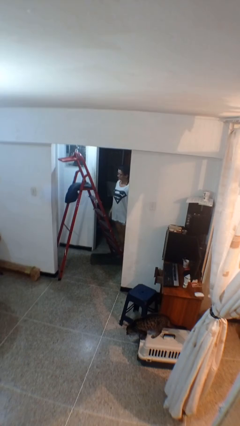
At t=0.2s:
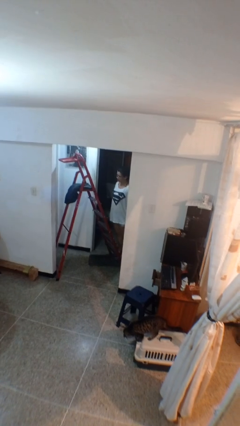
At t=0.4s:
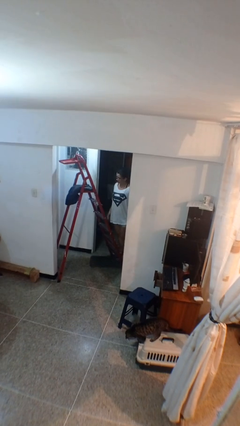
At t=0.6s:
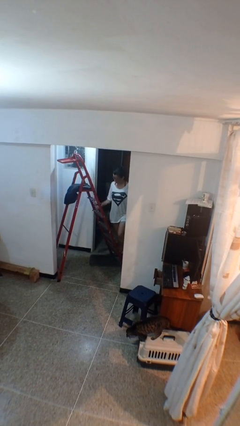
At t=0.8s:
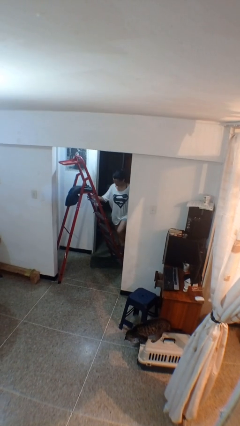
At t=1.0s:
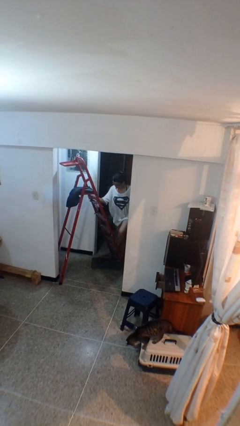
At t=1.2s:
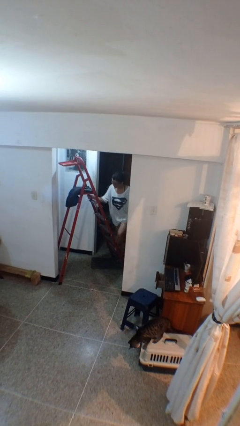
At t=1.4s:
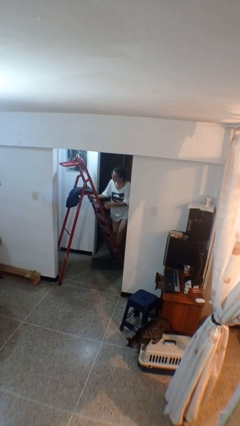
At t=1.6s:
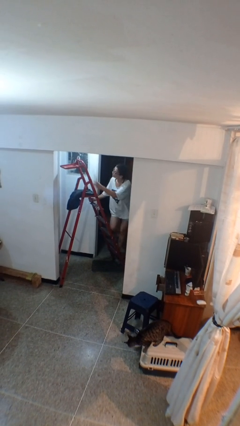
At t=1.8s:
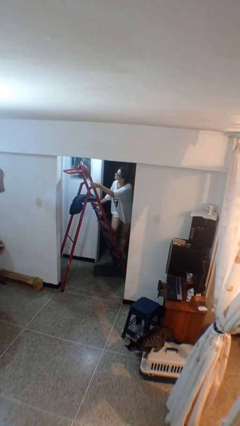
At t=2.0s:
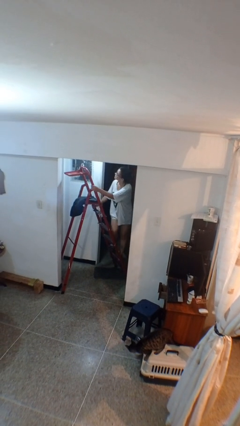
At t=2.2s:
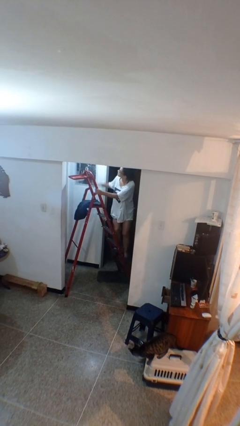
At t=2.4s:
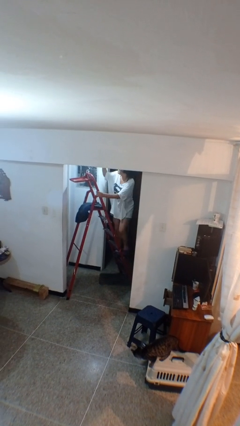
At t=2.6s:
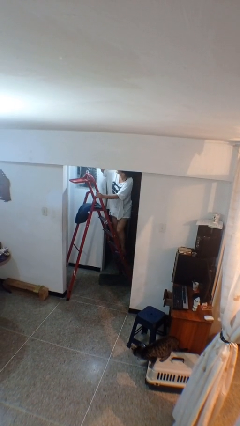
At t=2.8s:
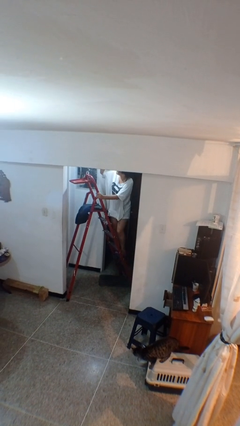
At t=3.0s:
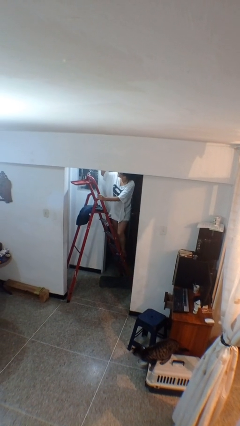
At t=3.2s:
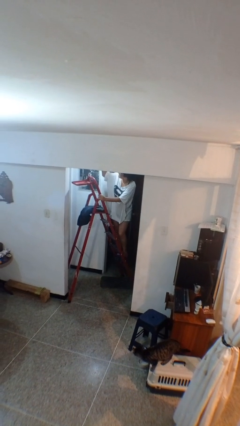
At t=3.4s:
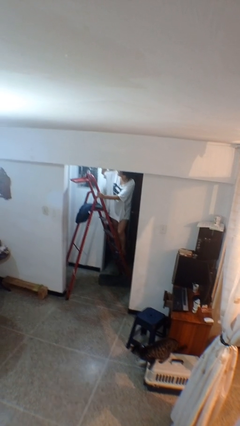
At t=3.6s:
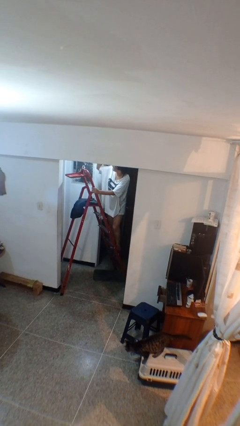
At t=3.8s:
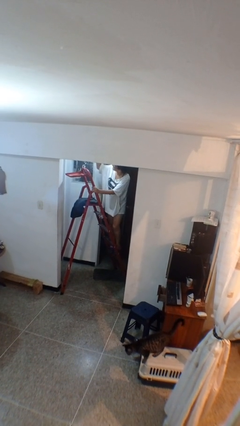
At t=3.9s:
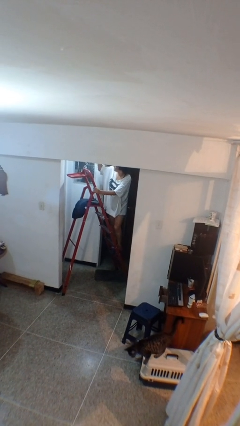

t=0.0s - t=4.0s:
person climbs up ladder

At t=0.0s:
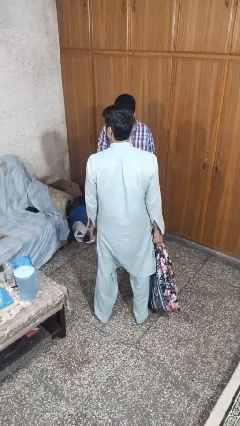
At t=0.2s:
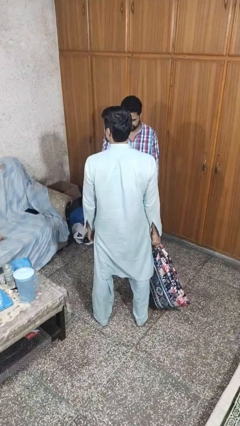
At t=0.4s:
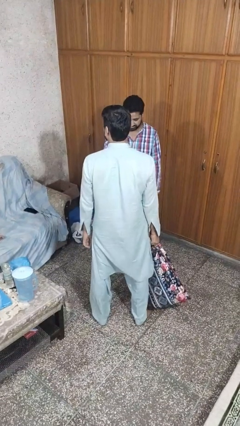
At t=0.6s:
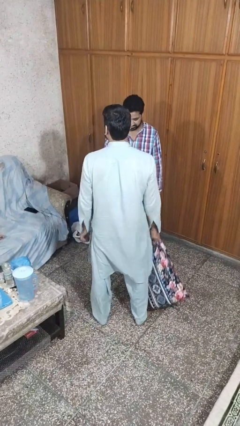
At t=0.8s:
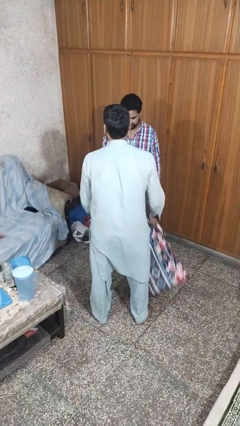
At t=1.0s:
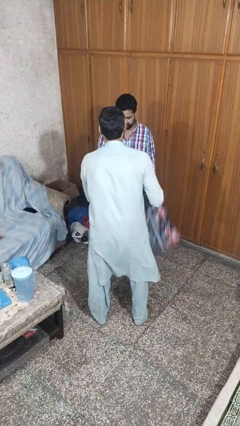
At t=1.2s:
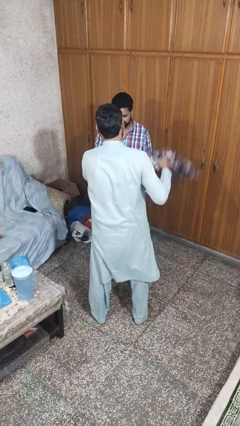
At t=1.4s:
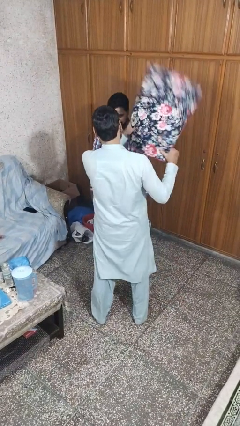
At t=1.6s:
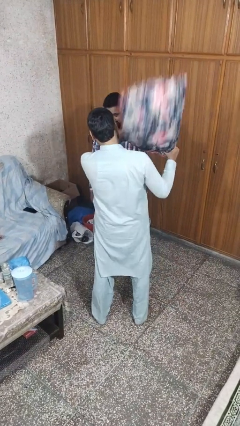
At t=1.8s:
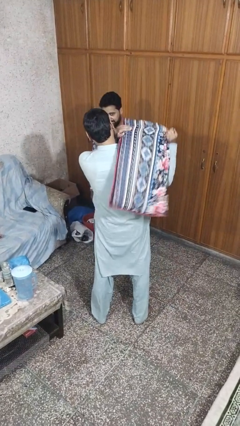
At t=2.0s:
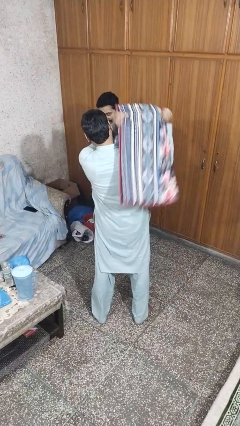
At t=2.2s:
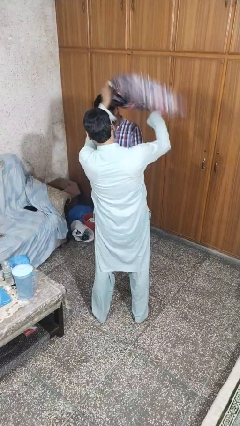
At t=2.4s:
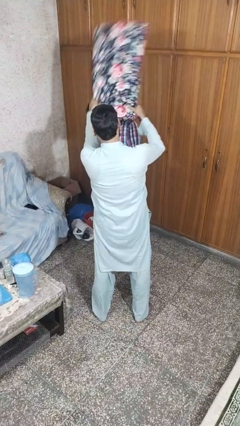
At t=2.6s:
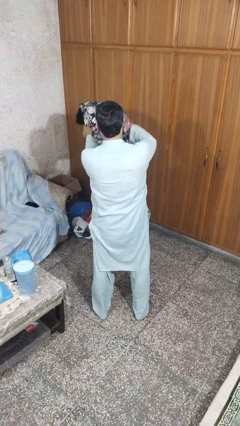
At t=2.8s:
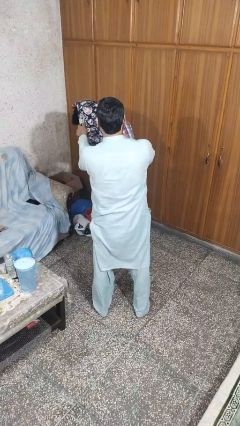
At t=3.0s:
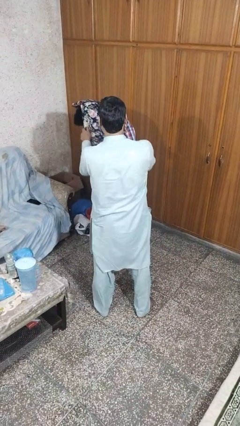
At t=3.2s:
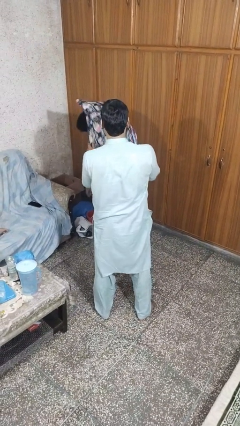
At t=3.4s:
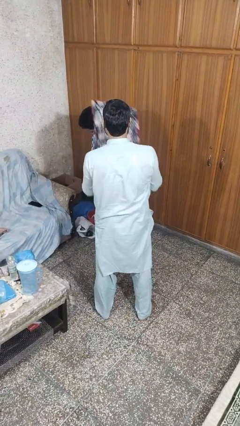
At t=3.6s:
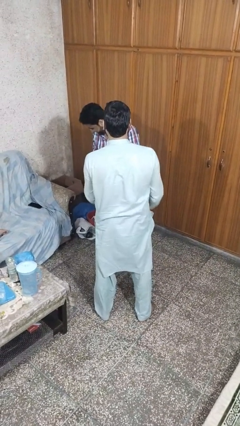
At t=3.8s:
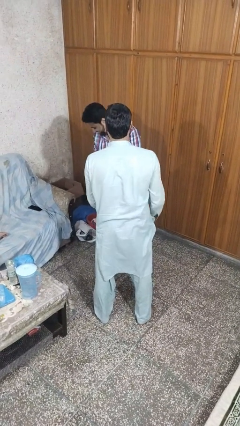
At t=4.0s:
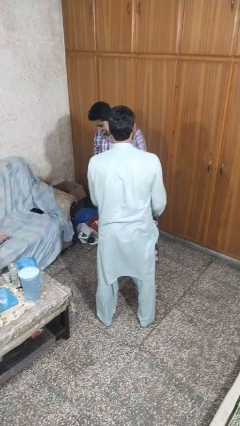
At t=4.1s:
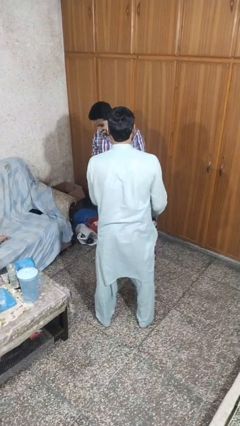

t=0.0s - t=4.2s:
person hits person with pillow

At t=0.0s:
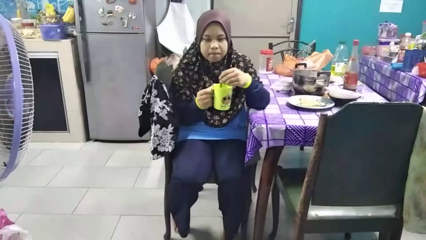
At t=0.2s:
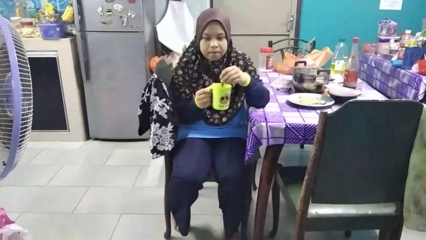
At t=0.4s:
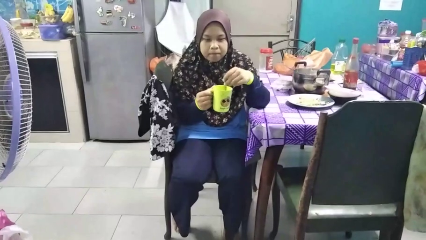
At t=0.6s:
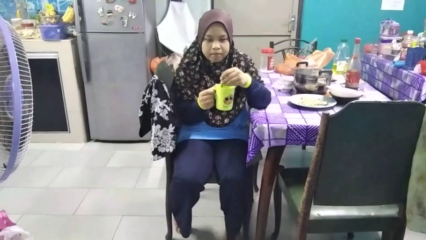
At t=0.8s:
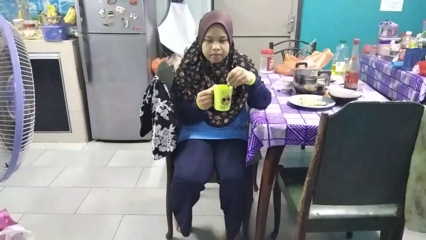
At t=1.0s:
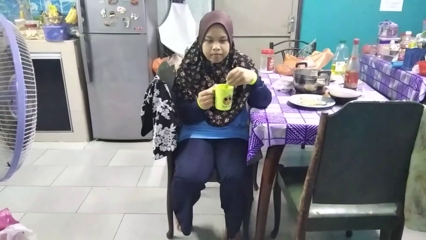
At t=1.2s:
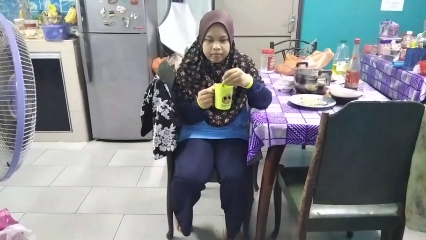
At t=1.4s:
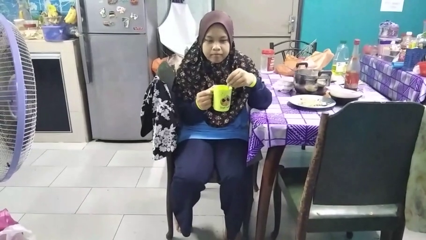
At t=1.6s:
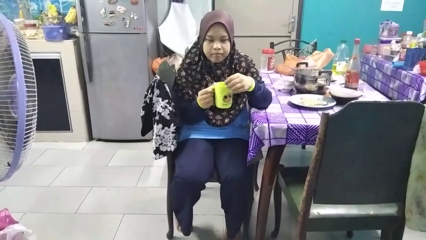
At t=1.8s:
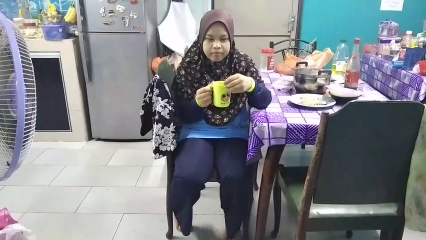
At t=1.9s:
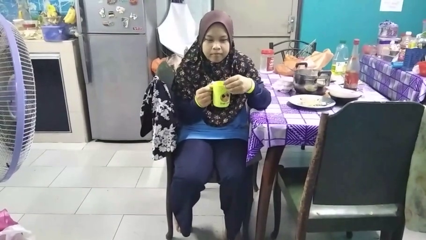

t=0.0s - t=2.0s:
person stirs mug

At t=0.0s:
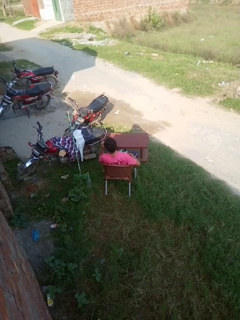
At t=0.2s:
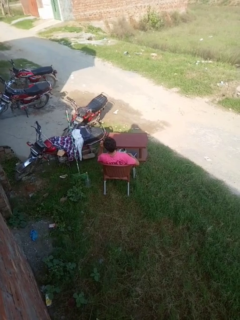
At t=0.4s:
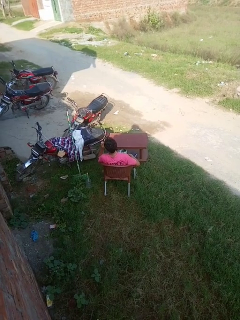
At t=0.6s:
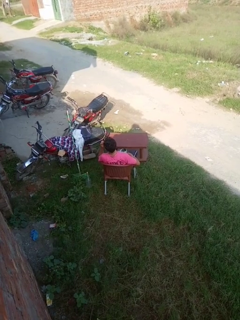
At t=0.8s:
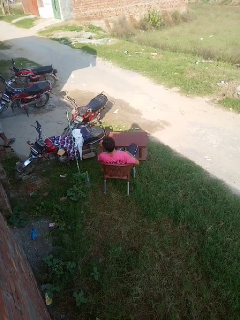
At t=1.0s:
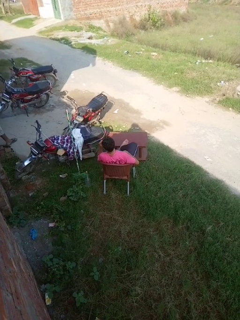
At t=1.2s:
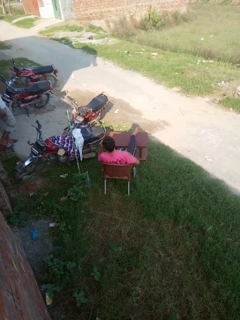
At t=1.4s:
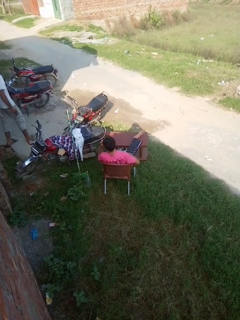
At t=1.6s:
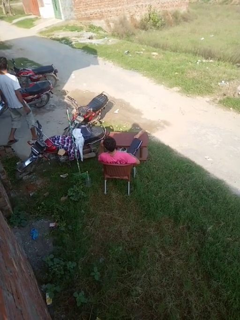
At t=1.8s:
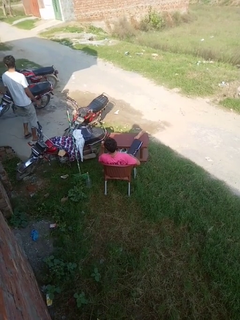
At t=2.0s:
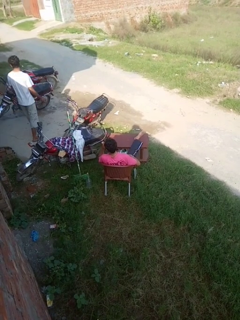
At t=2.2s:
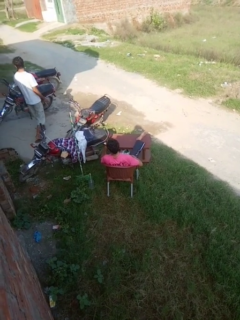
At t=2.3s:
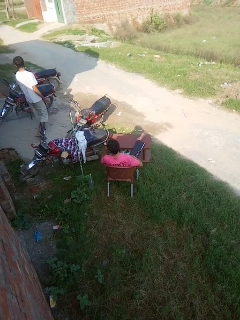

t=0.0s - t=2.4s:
person puts feet up

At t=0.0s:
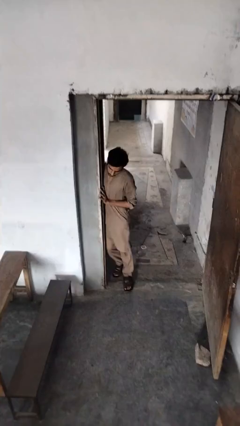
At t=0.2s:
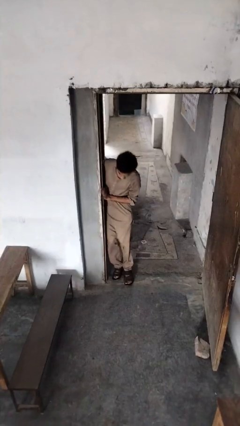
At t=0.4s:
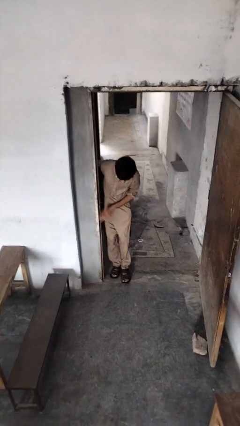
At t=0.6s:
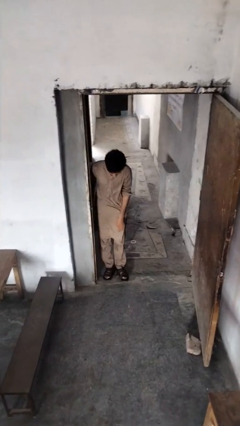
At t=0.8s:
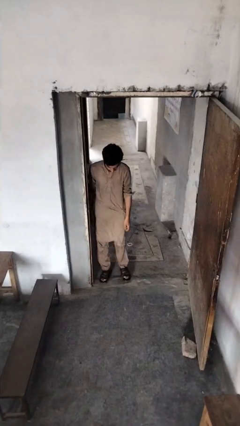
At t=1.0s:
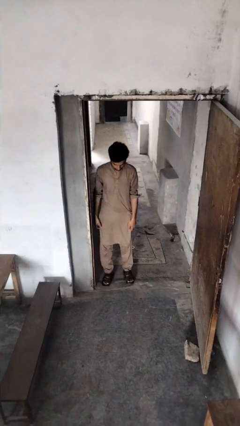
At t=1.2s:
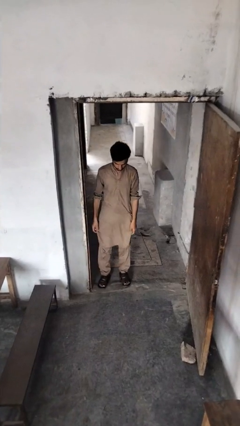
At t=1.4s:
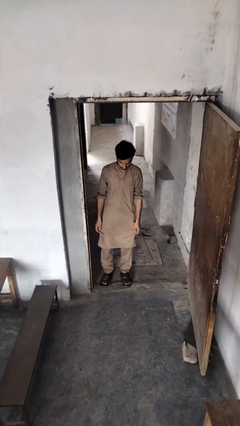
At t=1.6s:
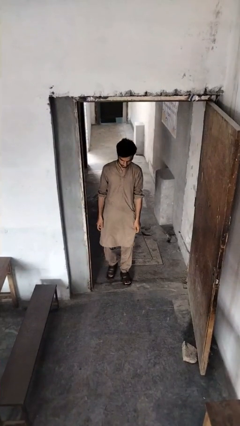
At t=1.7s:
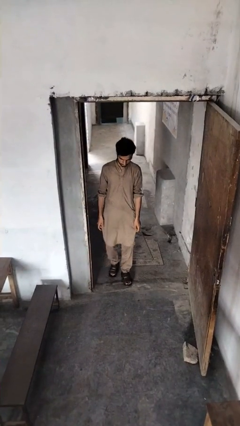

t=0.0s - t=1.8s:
person bumps into wall

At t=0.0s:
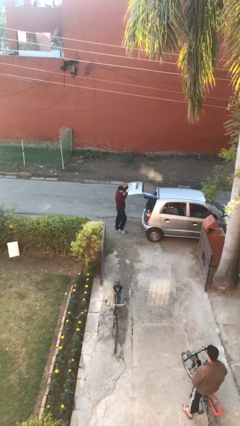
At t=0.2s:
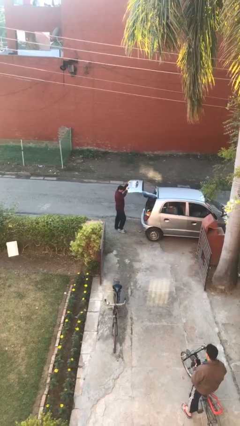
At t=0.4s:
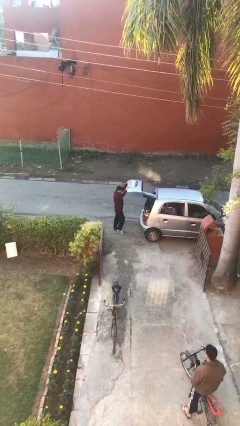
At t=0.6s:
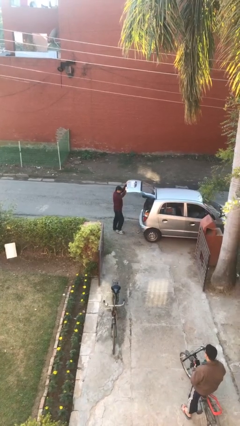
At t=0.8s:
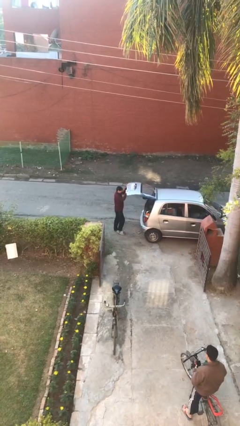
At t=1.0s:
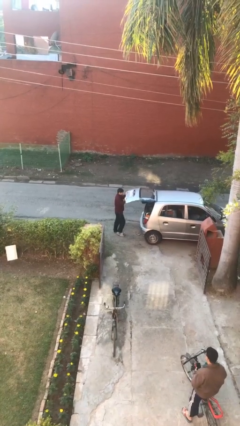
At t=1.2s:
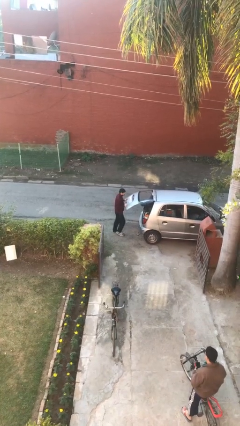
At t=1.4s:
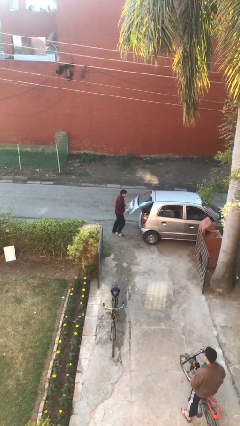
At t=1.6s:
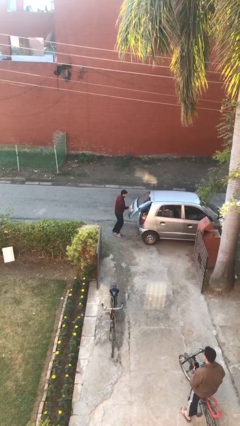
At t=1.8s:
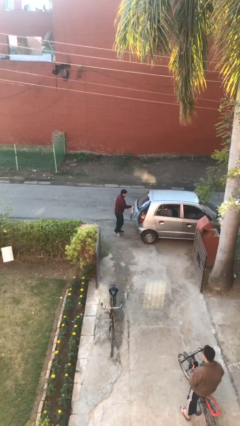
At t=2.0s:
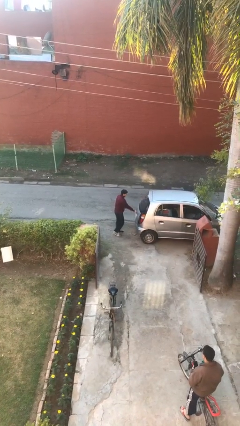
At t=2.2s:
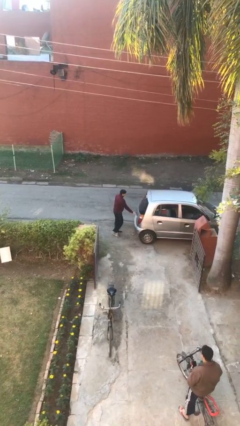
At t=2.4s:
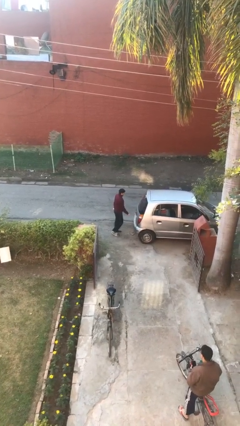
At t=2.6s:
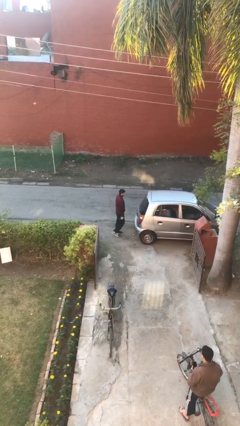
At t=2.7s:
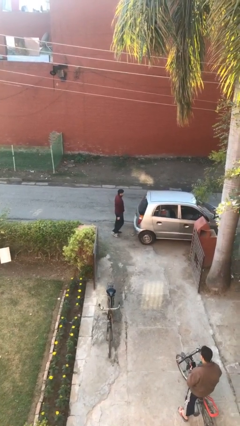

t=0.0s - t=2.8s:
person closes car trunk

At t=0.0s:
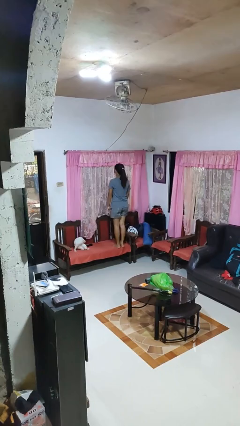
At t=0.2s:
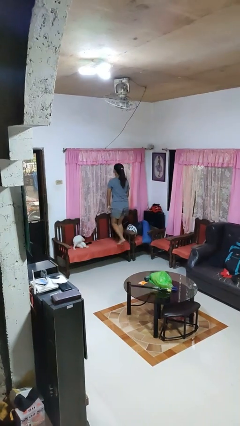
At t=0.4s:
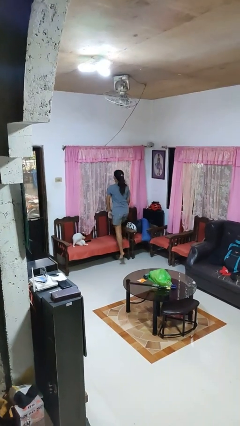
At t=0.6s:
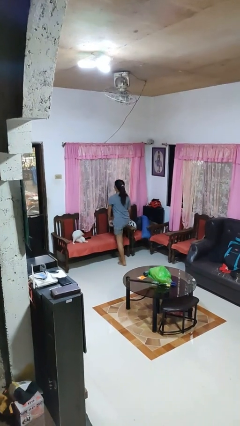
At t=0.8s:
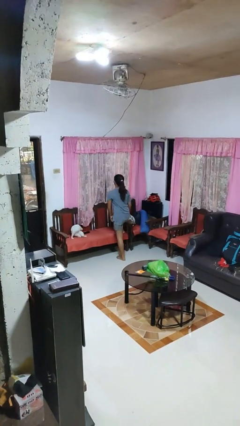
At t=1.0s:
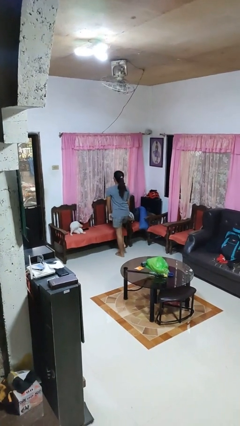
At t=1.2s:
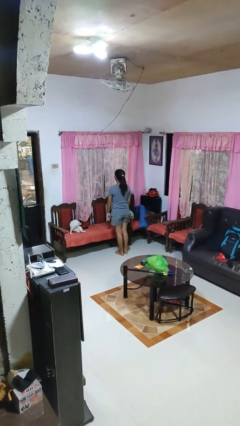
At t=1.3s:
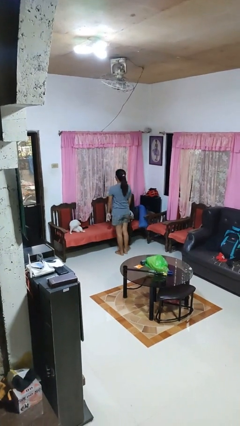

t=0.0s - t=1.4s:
person climbs off chair
